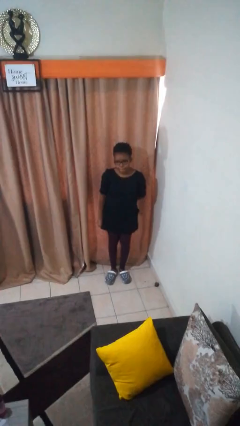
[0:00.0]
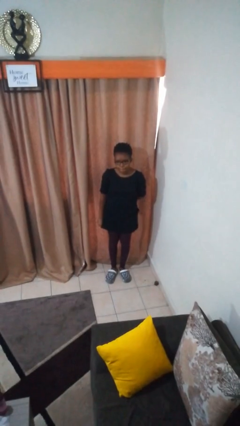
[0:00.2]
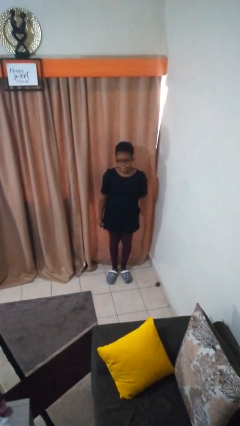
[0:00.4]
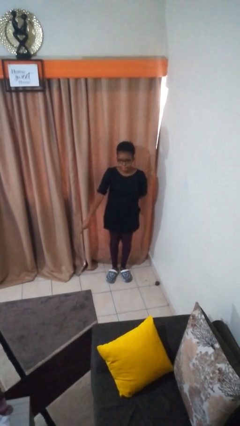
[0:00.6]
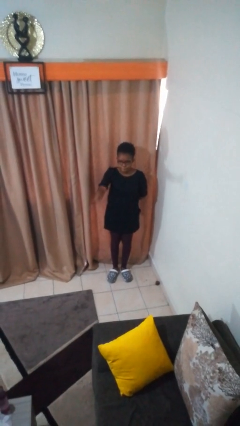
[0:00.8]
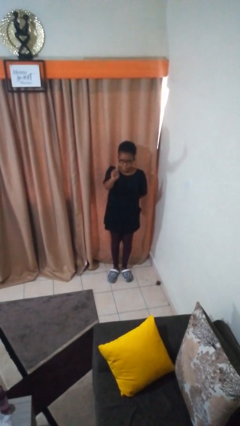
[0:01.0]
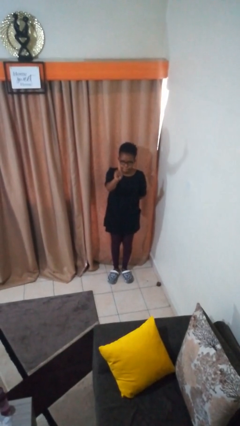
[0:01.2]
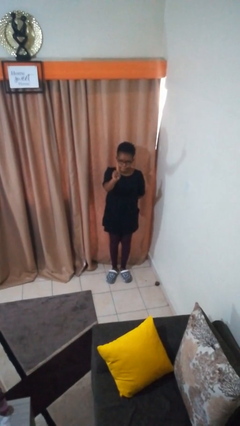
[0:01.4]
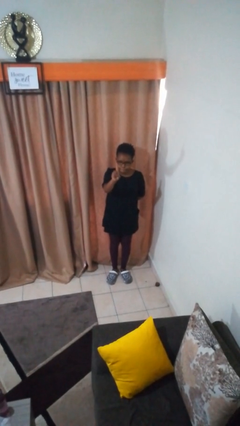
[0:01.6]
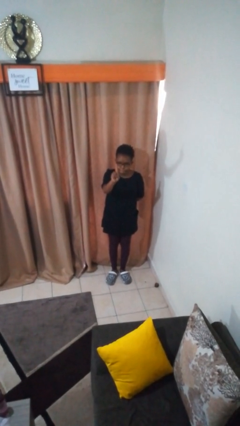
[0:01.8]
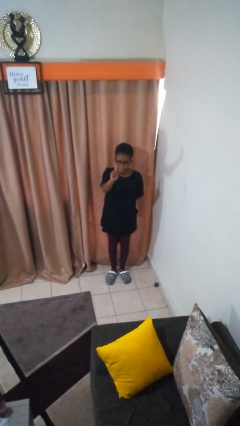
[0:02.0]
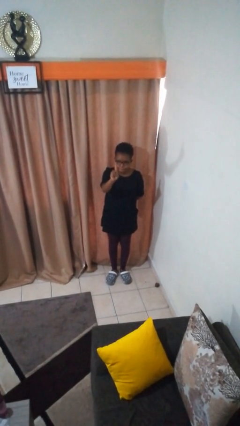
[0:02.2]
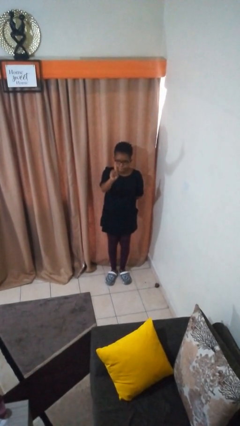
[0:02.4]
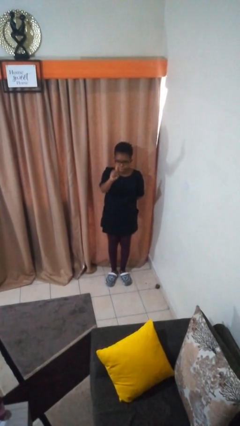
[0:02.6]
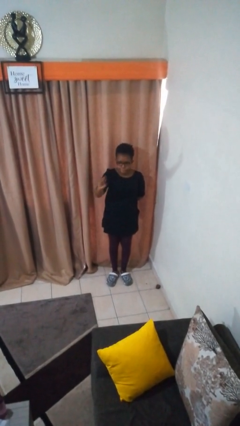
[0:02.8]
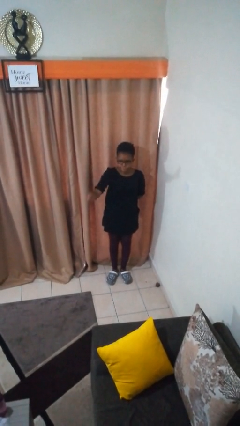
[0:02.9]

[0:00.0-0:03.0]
person gestures number one

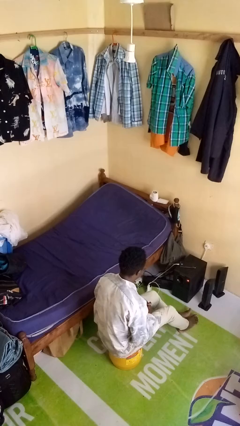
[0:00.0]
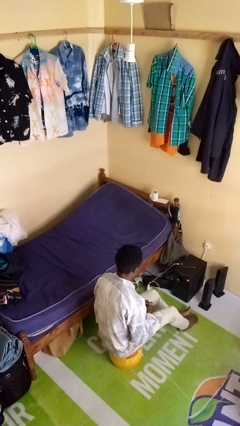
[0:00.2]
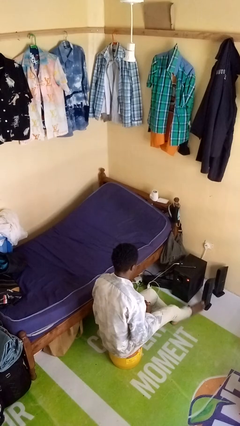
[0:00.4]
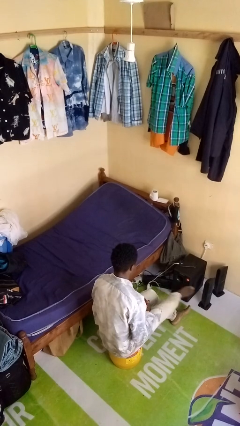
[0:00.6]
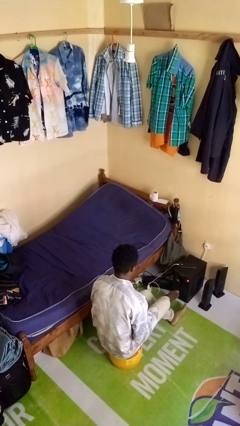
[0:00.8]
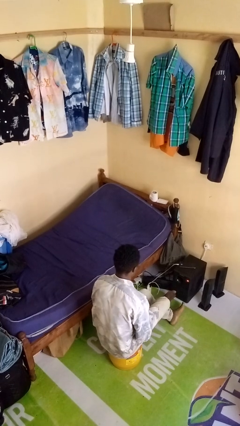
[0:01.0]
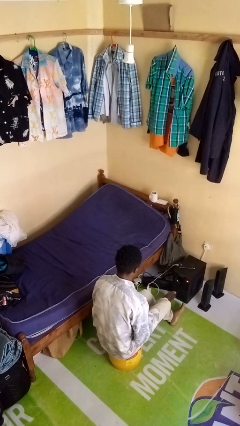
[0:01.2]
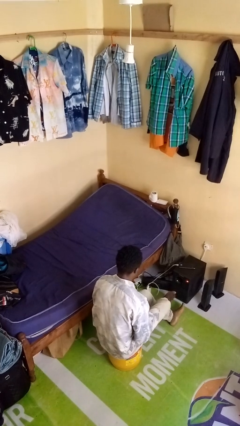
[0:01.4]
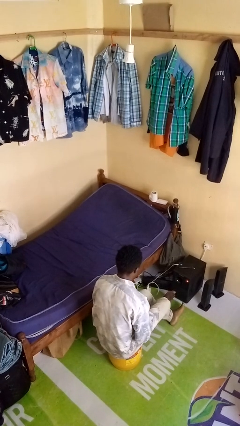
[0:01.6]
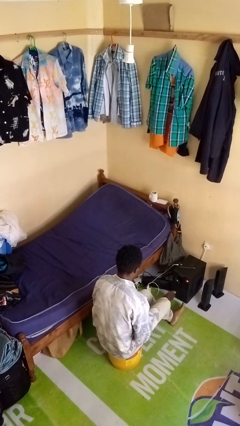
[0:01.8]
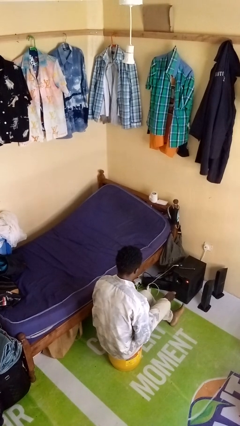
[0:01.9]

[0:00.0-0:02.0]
person crosses legs

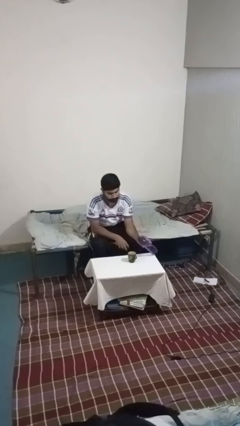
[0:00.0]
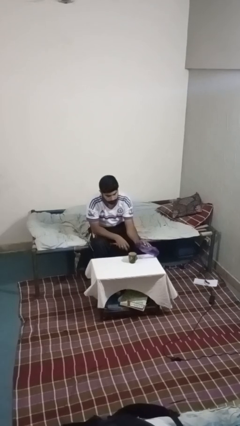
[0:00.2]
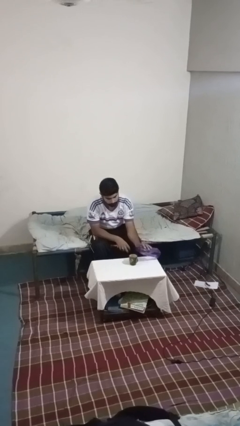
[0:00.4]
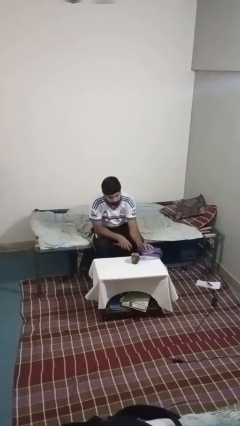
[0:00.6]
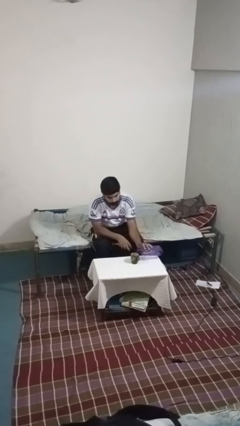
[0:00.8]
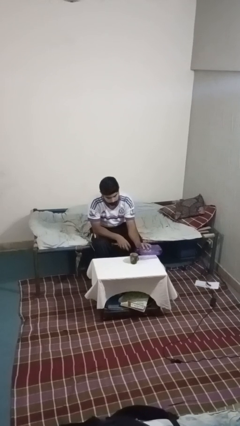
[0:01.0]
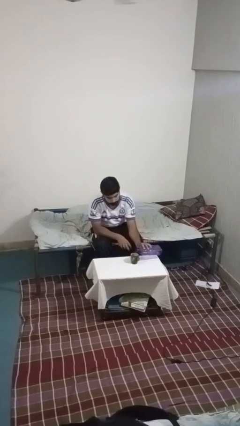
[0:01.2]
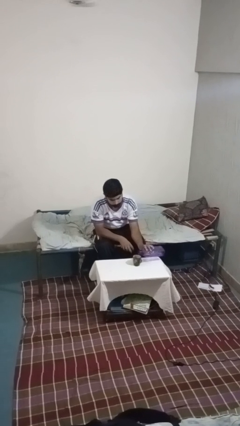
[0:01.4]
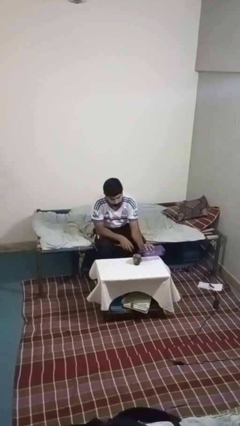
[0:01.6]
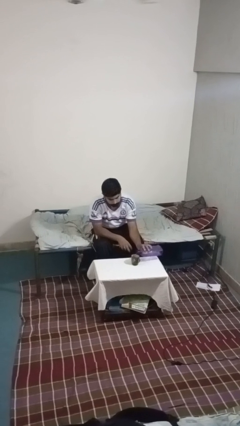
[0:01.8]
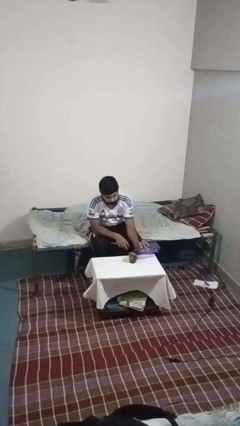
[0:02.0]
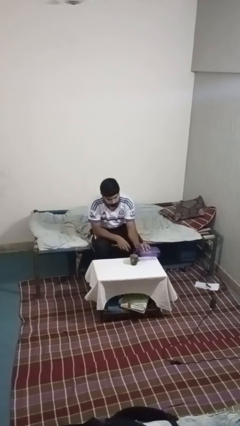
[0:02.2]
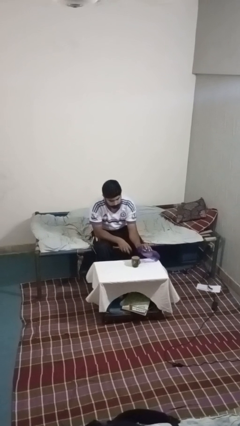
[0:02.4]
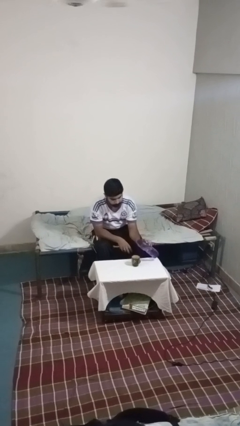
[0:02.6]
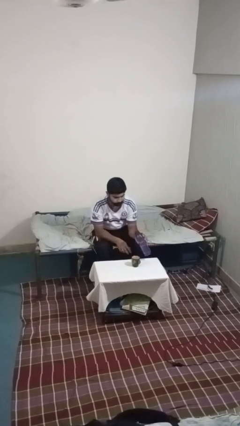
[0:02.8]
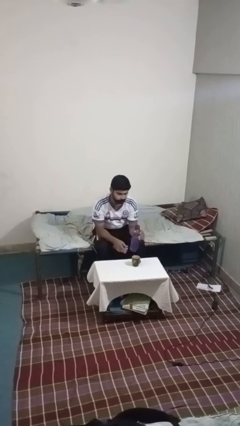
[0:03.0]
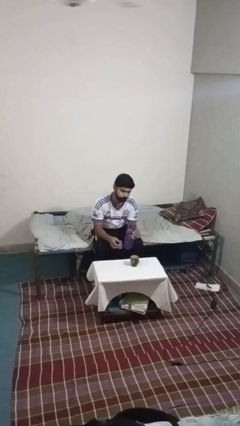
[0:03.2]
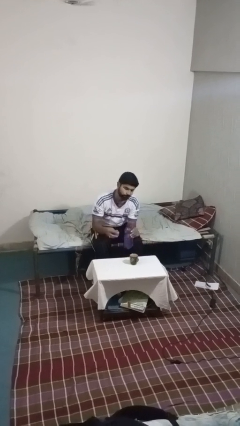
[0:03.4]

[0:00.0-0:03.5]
person pours liquid into cup

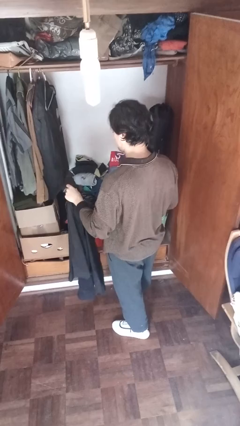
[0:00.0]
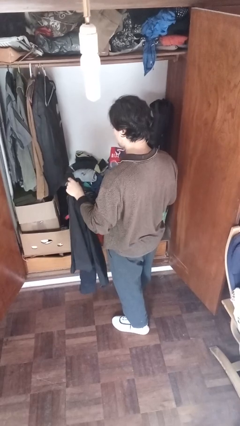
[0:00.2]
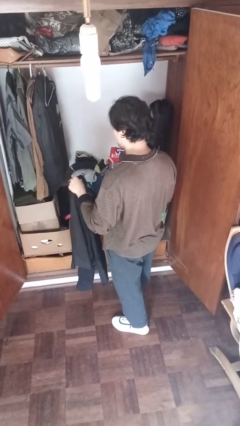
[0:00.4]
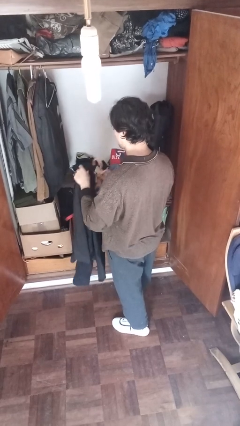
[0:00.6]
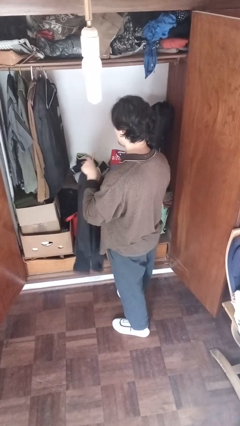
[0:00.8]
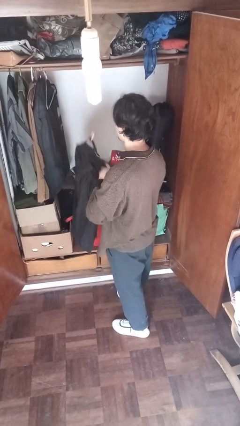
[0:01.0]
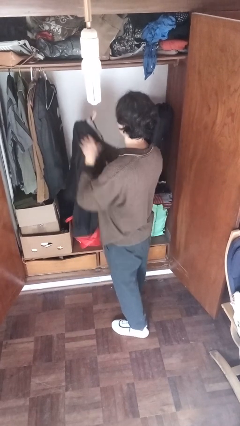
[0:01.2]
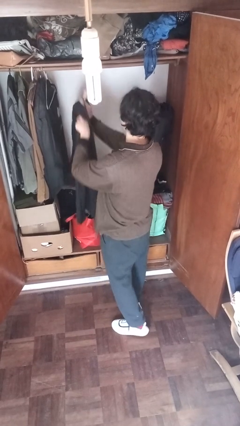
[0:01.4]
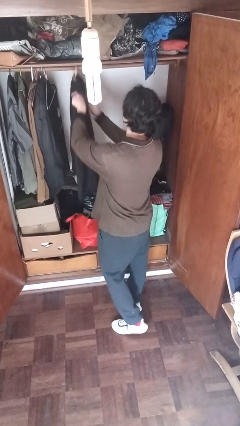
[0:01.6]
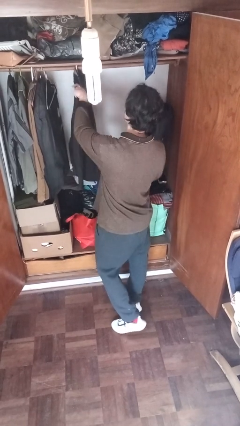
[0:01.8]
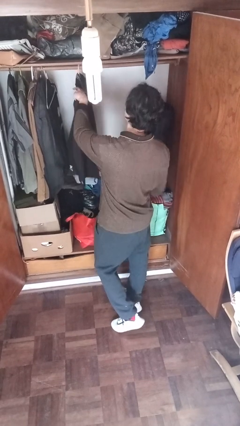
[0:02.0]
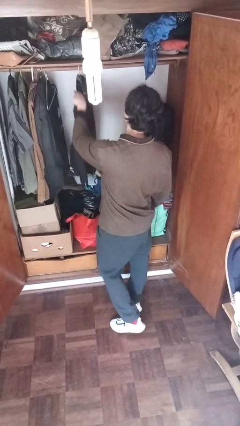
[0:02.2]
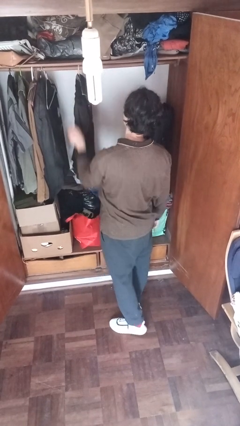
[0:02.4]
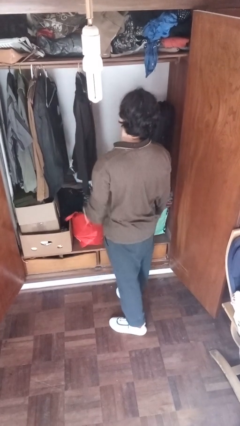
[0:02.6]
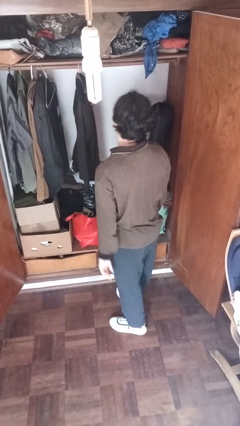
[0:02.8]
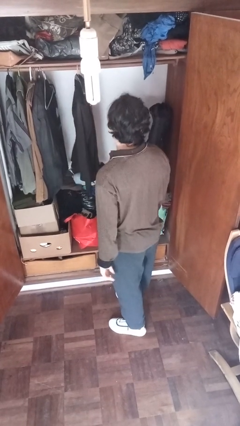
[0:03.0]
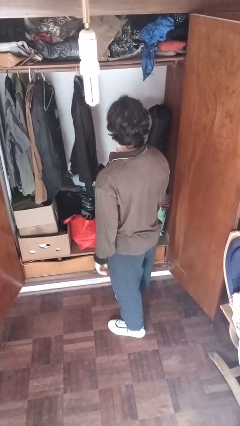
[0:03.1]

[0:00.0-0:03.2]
person puts clothes into closet

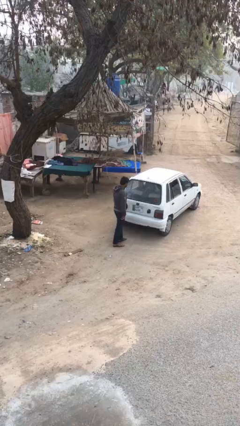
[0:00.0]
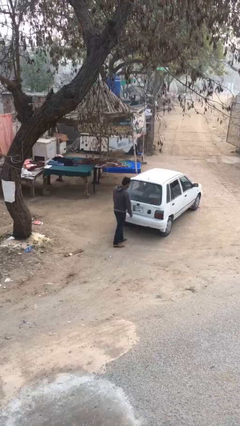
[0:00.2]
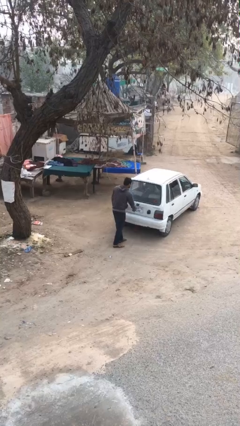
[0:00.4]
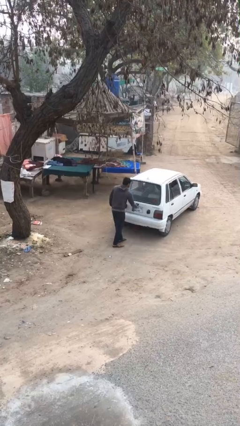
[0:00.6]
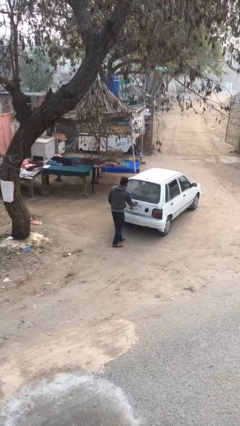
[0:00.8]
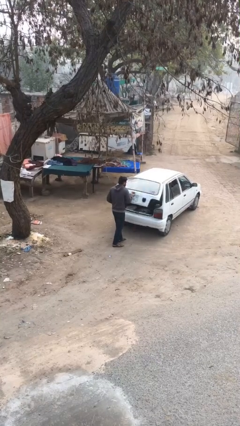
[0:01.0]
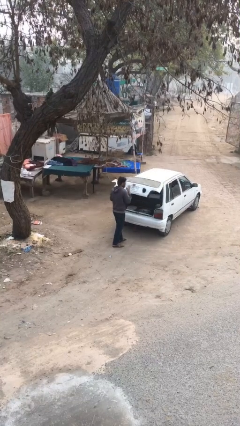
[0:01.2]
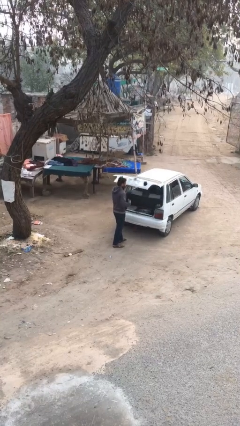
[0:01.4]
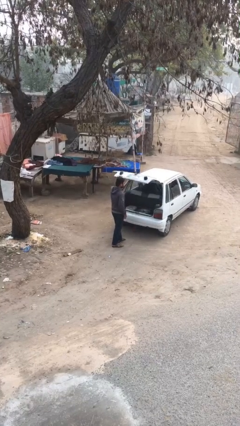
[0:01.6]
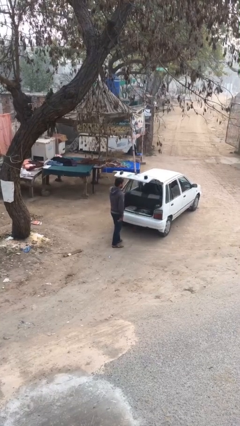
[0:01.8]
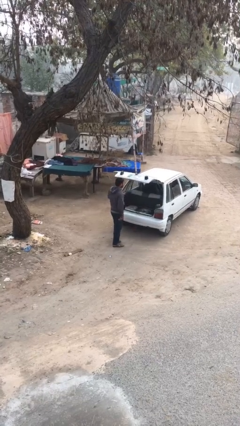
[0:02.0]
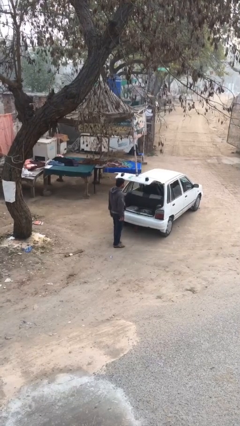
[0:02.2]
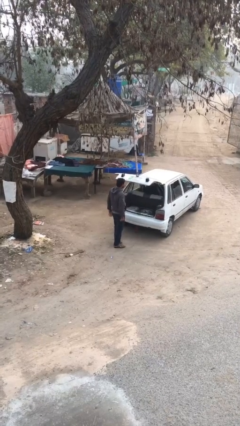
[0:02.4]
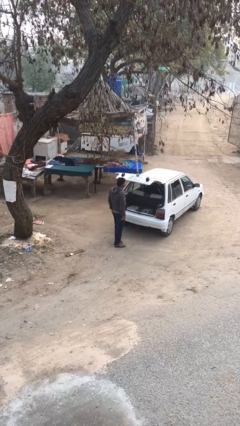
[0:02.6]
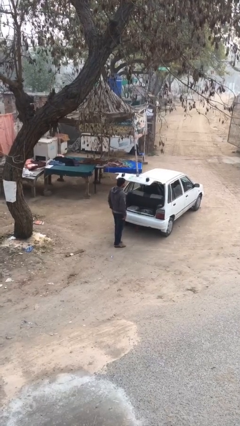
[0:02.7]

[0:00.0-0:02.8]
person opens car trunk

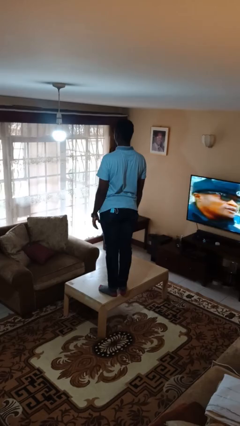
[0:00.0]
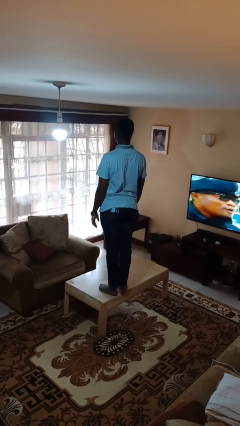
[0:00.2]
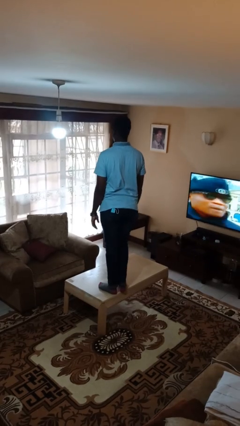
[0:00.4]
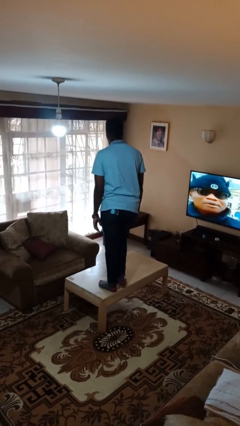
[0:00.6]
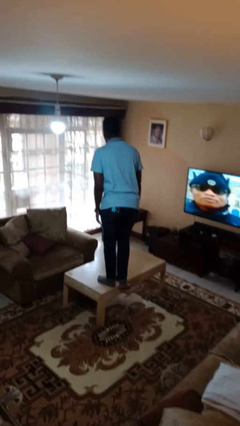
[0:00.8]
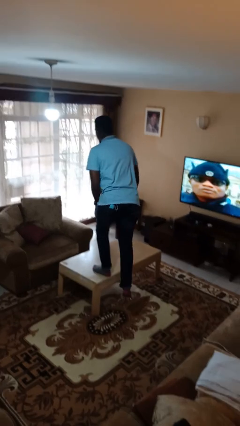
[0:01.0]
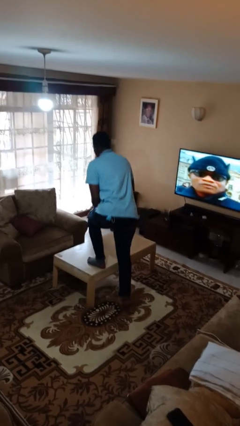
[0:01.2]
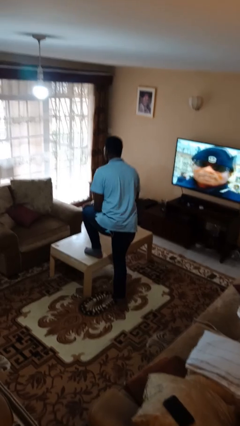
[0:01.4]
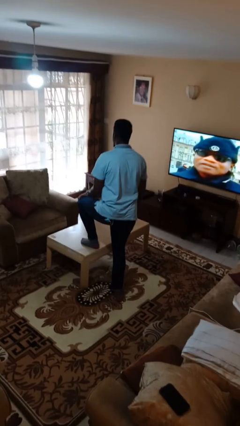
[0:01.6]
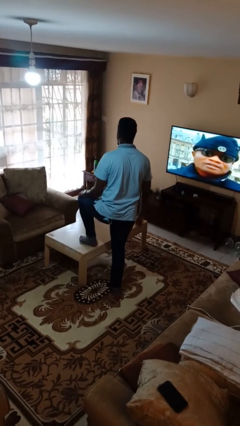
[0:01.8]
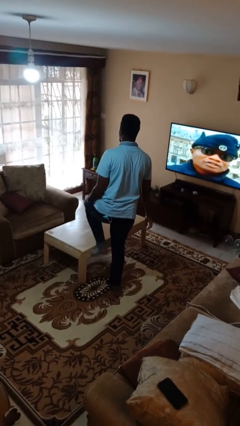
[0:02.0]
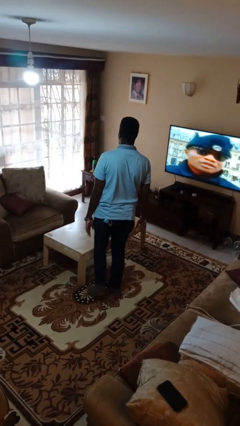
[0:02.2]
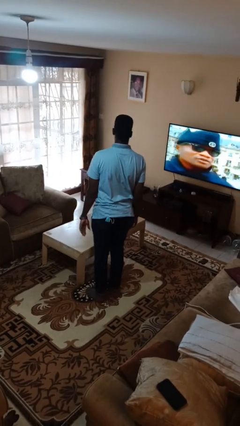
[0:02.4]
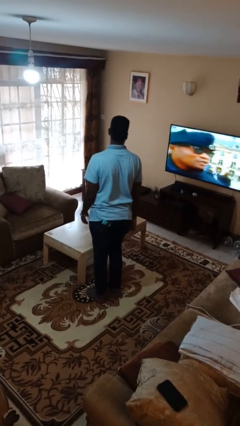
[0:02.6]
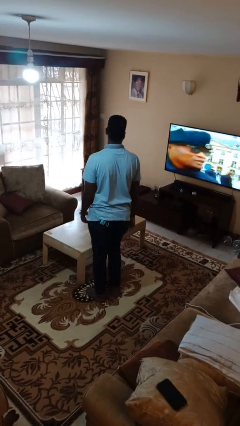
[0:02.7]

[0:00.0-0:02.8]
person climbs off table

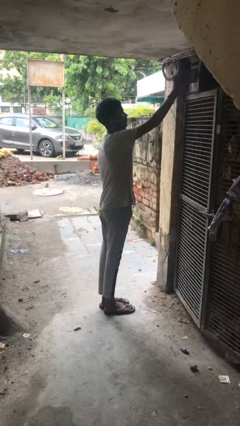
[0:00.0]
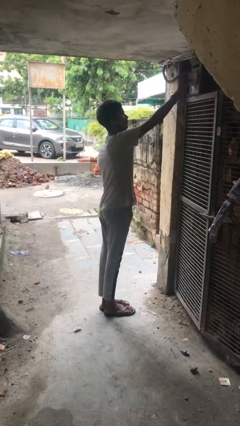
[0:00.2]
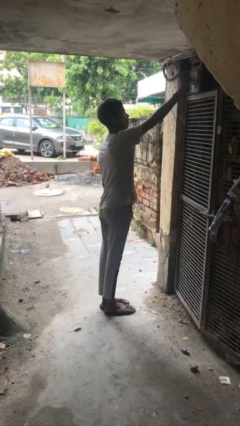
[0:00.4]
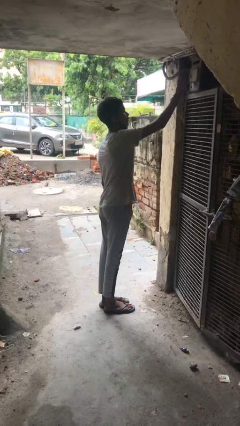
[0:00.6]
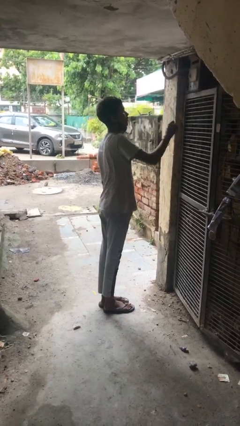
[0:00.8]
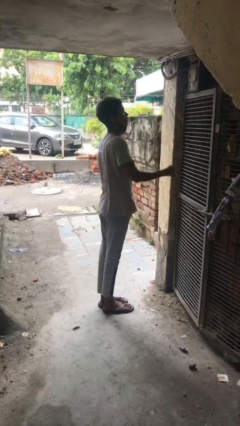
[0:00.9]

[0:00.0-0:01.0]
person closes mailbox
